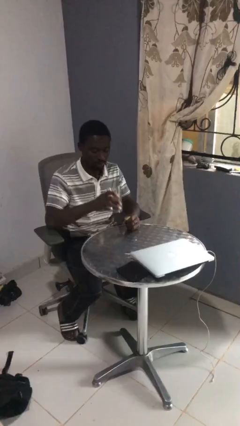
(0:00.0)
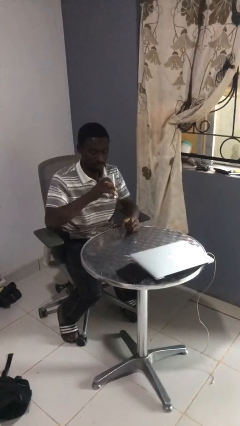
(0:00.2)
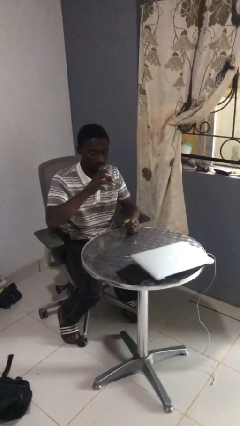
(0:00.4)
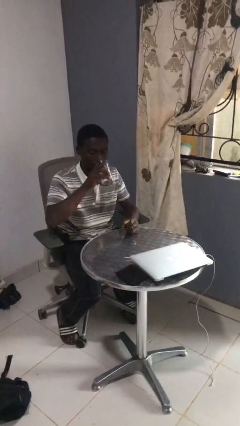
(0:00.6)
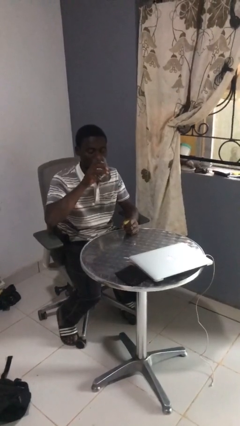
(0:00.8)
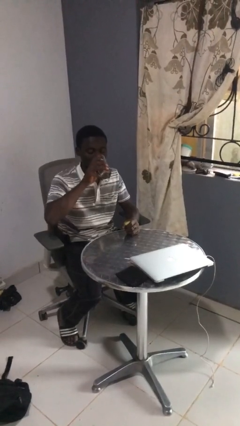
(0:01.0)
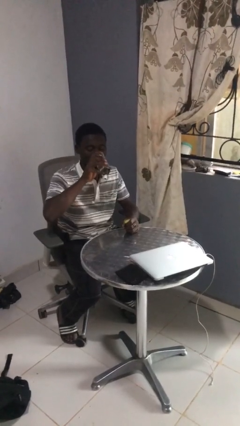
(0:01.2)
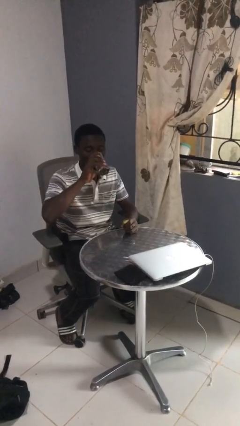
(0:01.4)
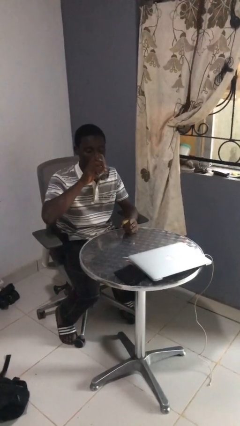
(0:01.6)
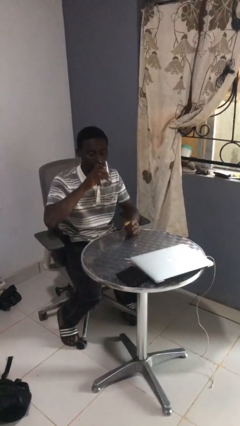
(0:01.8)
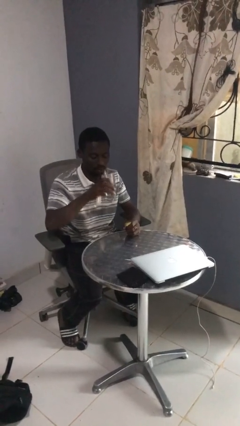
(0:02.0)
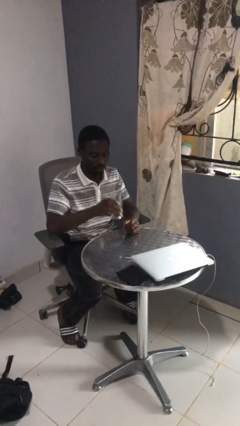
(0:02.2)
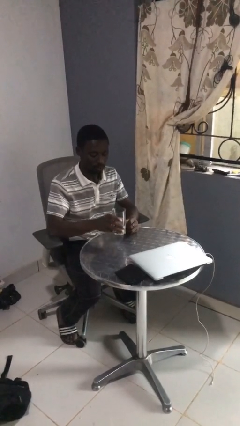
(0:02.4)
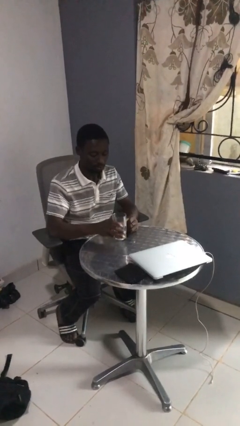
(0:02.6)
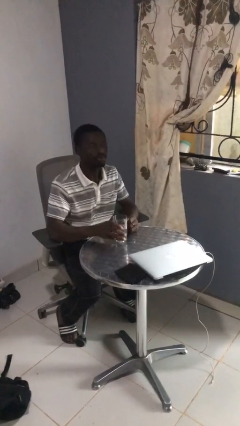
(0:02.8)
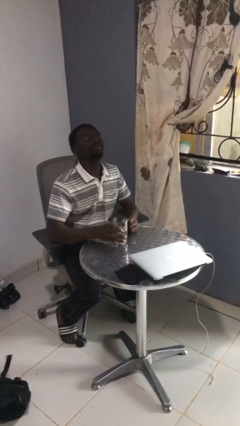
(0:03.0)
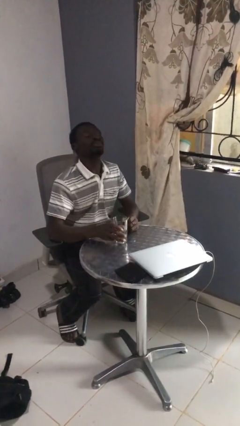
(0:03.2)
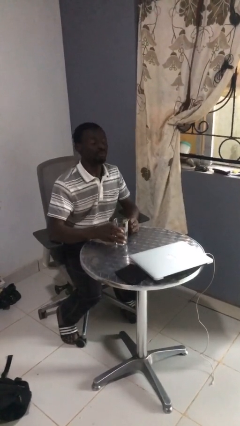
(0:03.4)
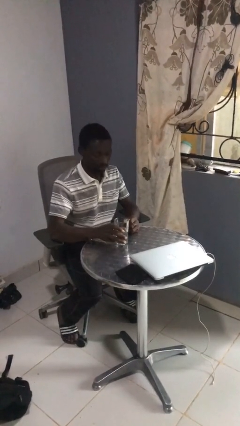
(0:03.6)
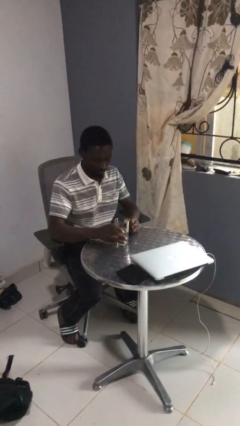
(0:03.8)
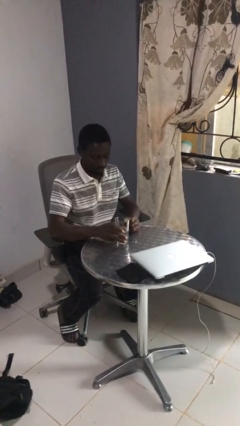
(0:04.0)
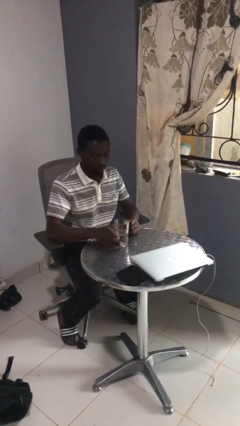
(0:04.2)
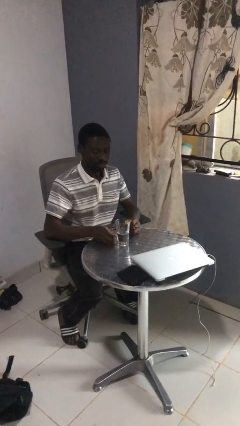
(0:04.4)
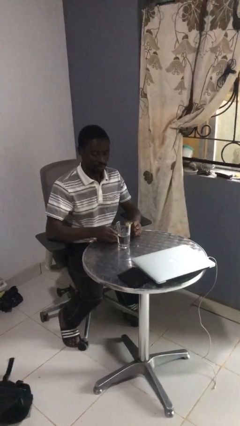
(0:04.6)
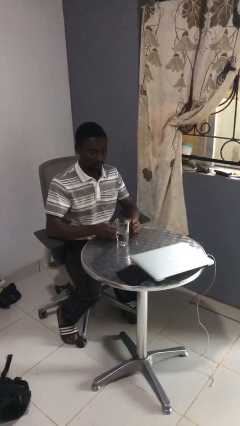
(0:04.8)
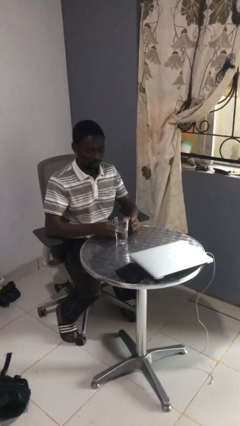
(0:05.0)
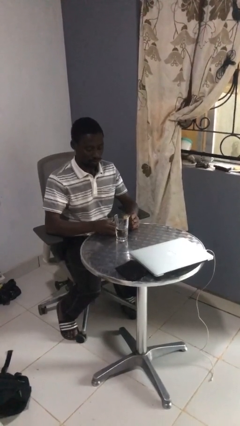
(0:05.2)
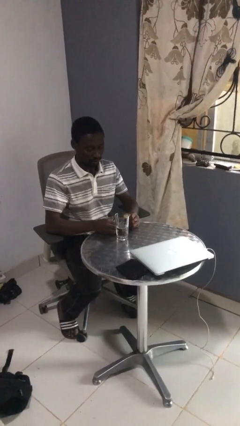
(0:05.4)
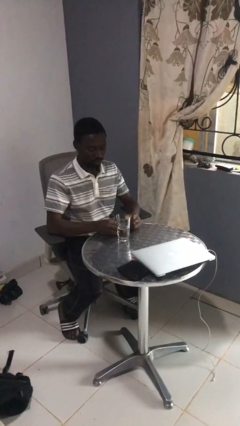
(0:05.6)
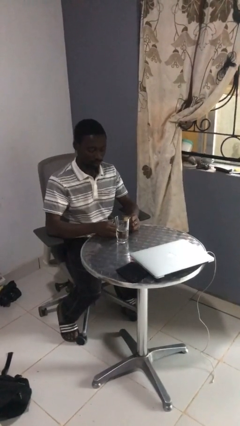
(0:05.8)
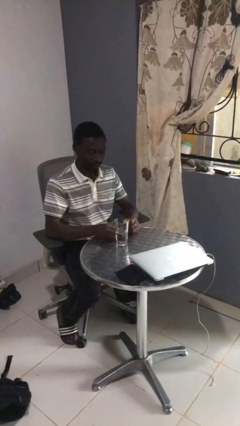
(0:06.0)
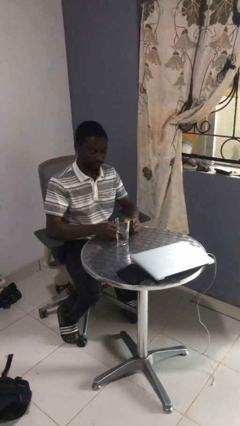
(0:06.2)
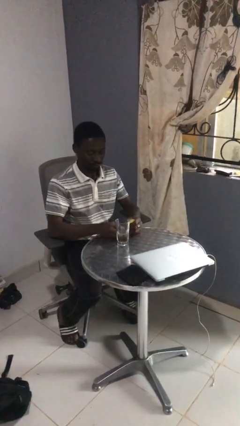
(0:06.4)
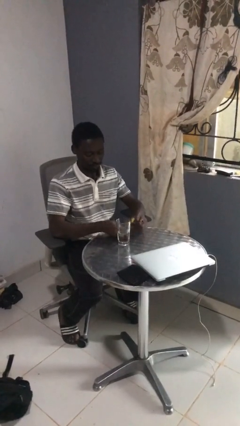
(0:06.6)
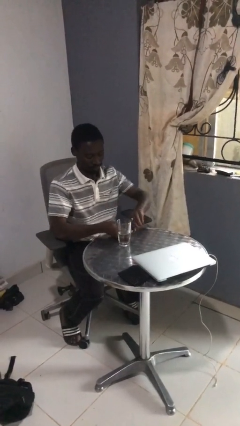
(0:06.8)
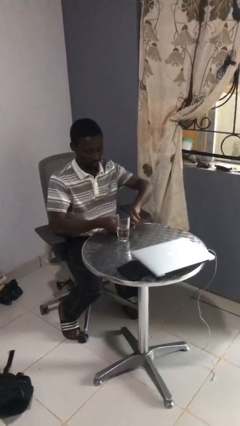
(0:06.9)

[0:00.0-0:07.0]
person drinks from cup

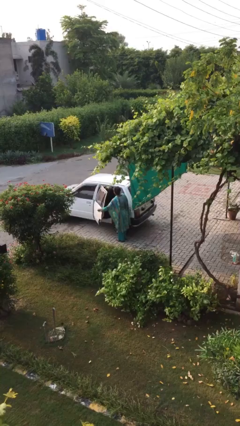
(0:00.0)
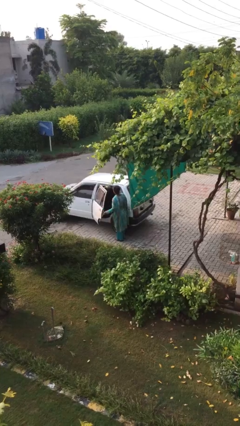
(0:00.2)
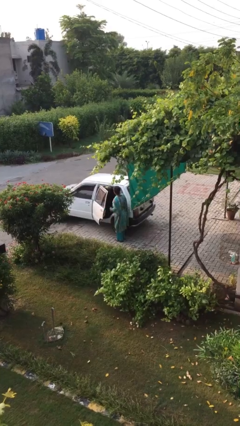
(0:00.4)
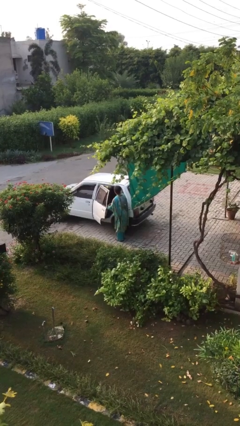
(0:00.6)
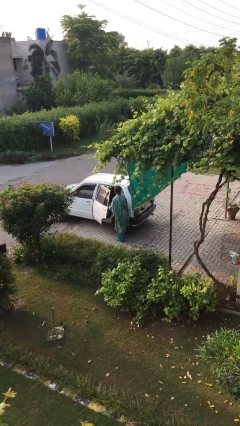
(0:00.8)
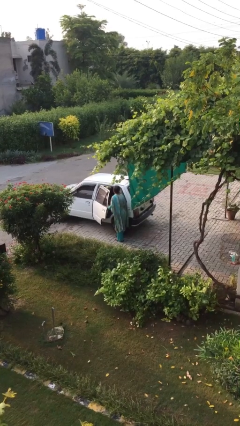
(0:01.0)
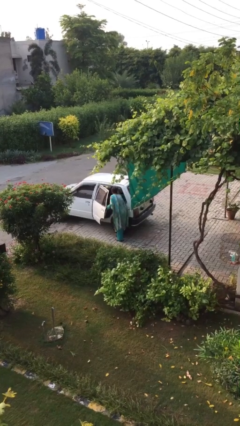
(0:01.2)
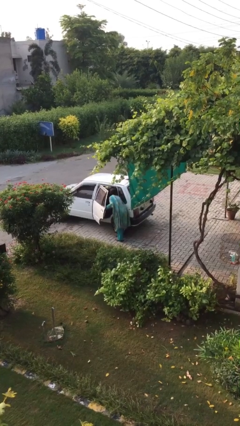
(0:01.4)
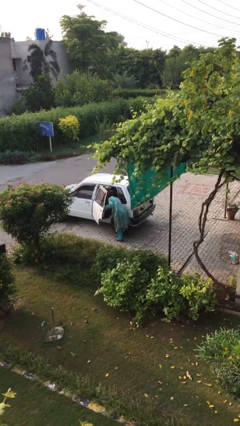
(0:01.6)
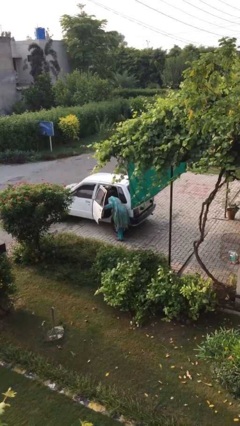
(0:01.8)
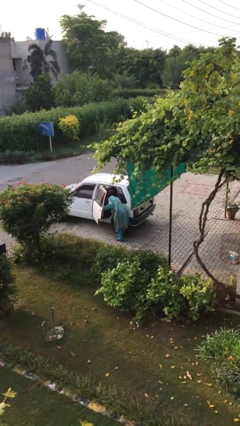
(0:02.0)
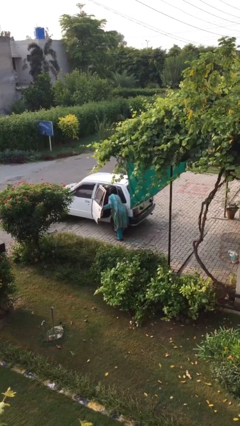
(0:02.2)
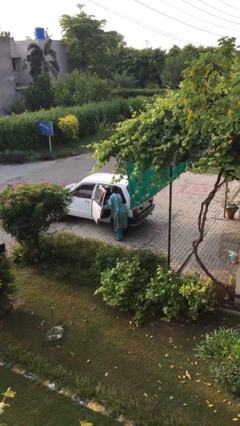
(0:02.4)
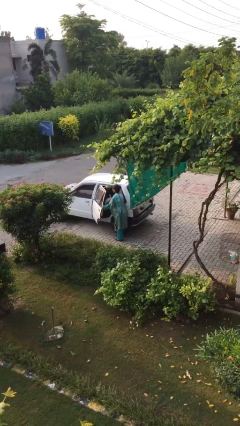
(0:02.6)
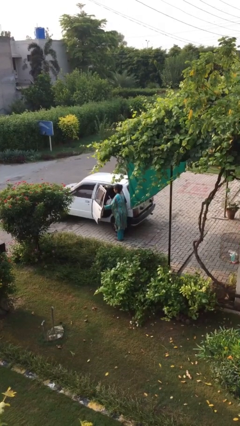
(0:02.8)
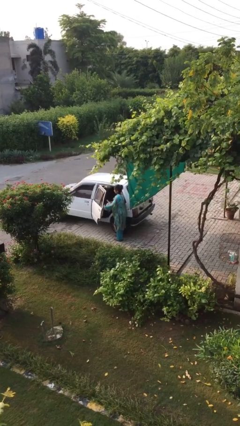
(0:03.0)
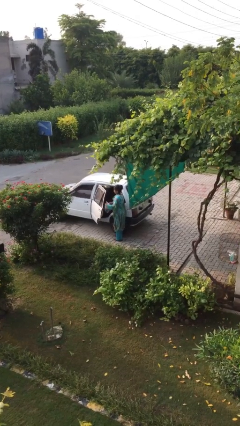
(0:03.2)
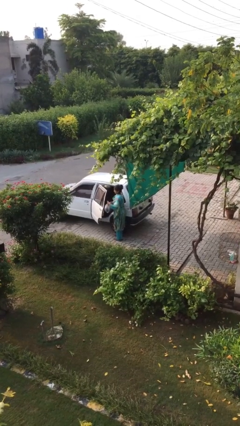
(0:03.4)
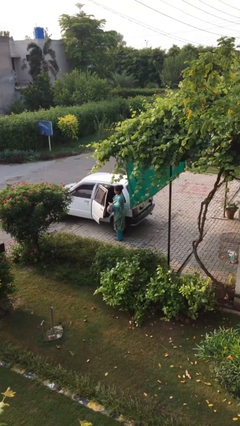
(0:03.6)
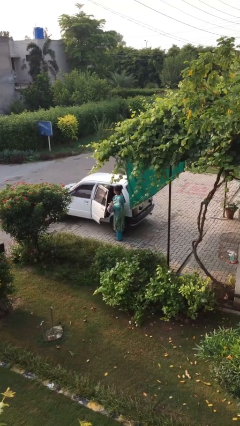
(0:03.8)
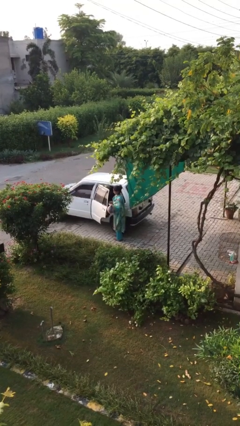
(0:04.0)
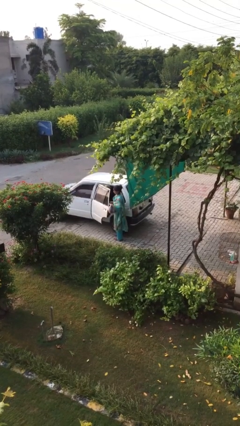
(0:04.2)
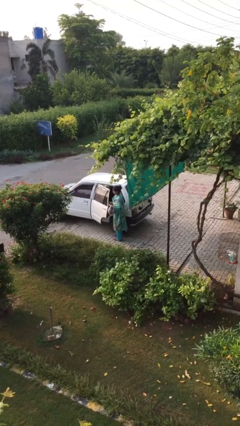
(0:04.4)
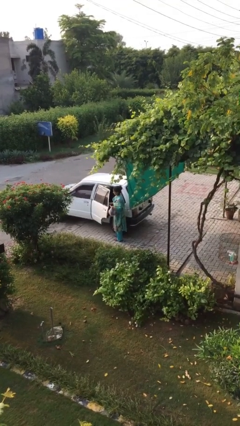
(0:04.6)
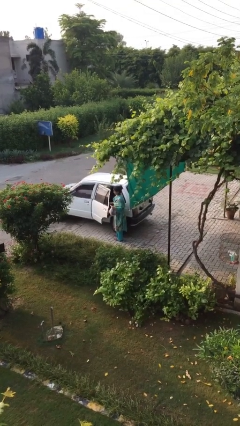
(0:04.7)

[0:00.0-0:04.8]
person unloads car

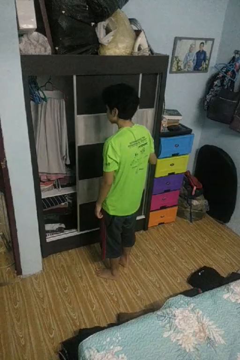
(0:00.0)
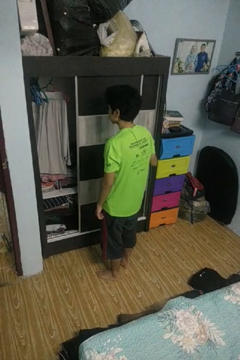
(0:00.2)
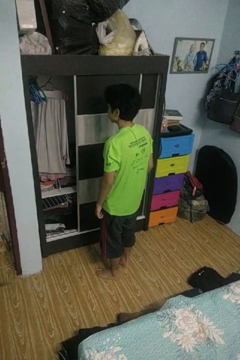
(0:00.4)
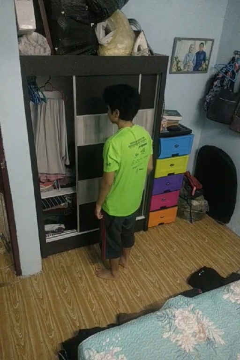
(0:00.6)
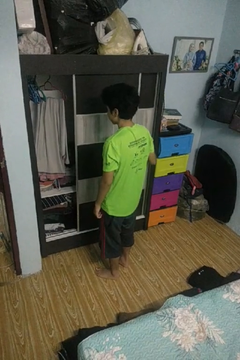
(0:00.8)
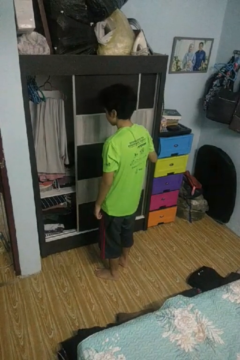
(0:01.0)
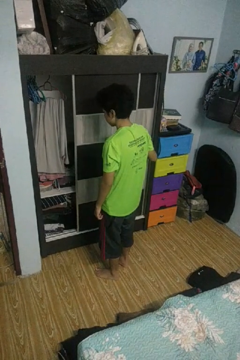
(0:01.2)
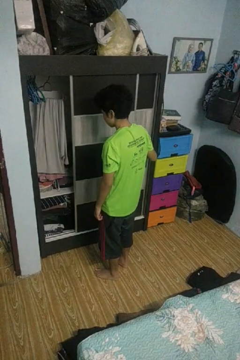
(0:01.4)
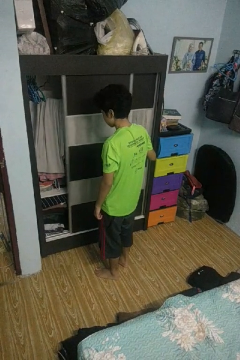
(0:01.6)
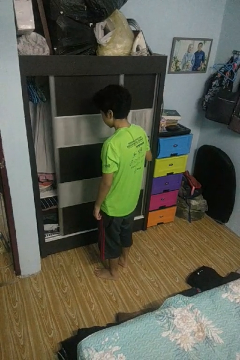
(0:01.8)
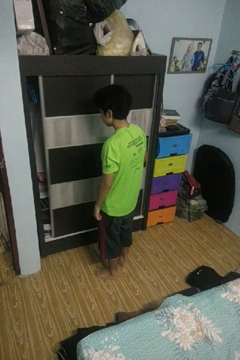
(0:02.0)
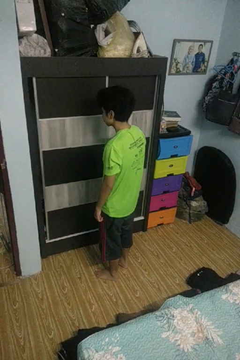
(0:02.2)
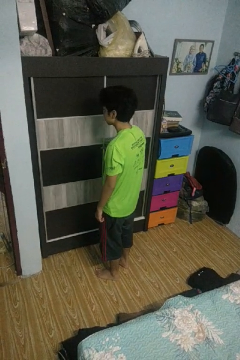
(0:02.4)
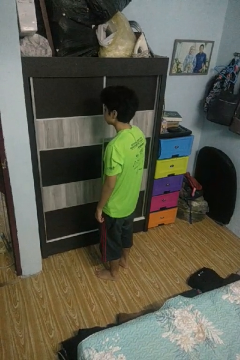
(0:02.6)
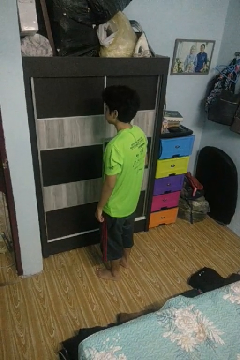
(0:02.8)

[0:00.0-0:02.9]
person closes closet door

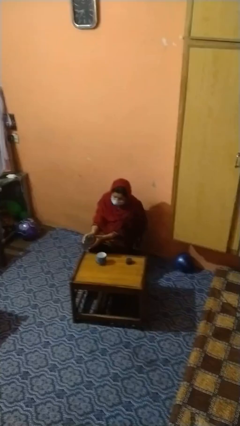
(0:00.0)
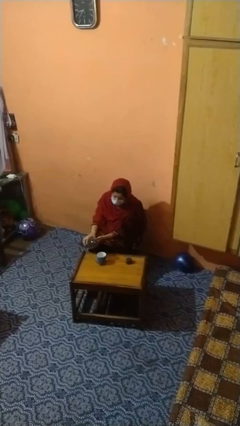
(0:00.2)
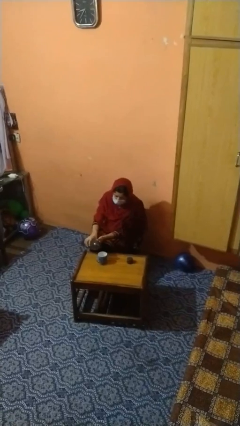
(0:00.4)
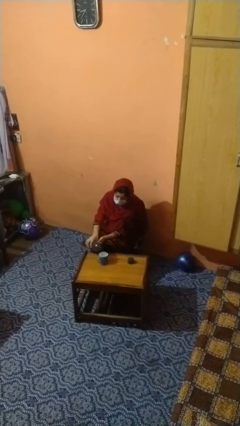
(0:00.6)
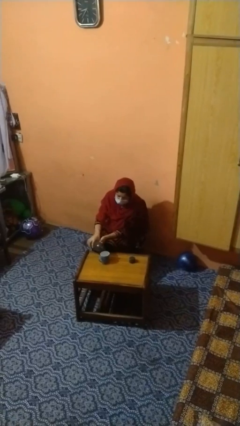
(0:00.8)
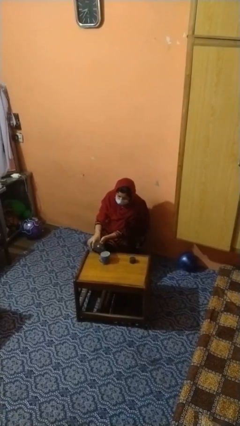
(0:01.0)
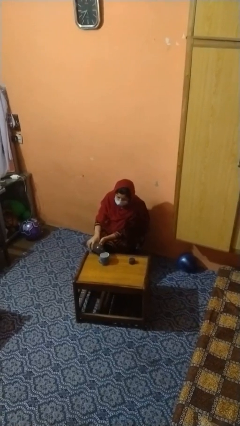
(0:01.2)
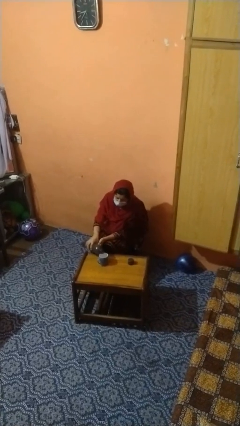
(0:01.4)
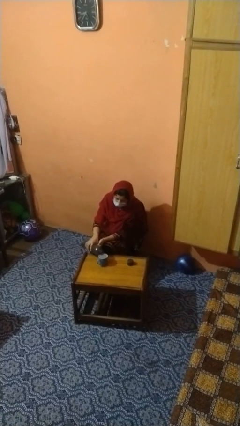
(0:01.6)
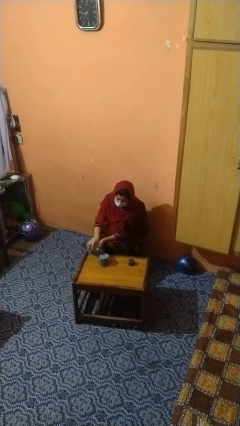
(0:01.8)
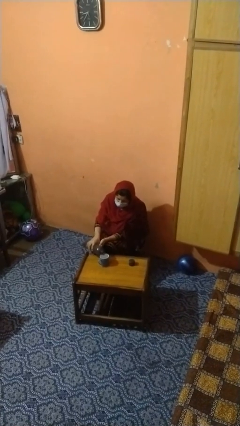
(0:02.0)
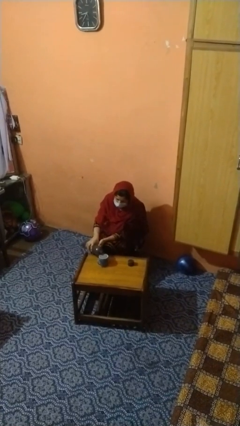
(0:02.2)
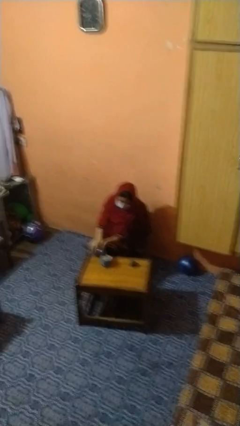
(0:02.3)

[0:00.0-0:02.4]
person pours liquid into cup

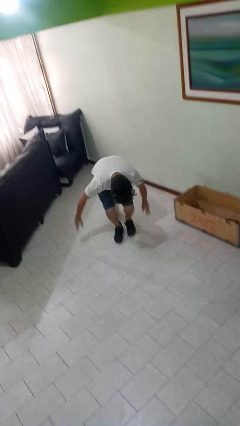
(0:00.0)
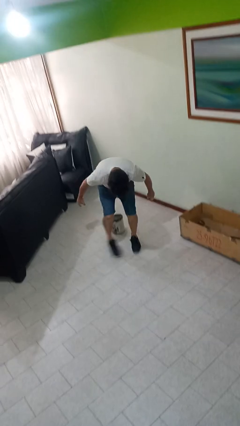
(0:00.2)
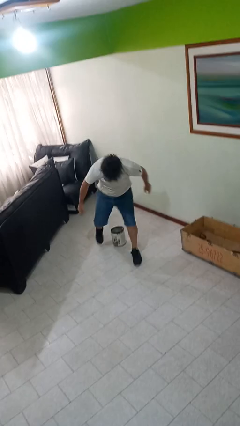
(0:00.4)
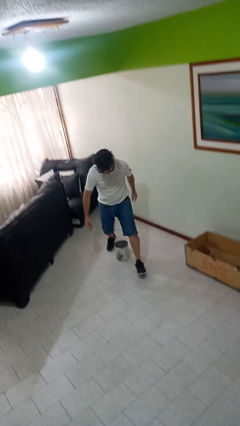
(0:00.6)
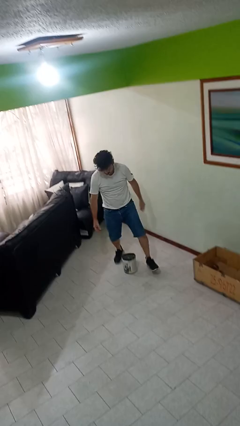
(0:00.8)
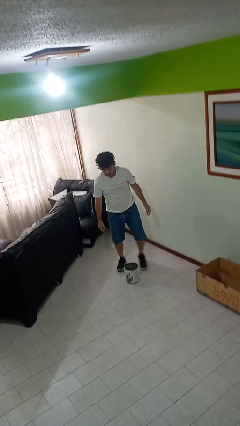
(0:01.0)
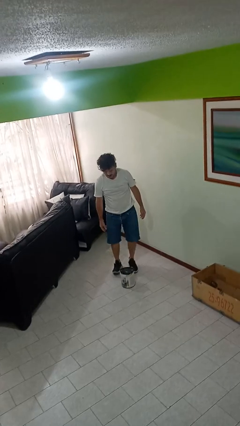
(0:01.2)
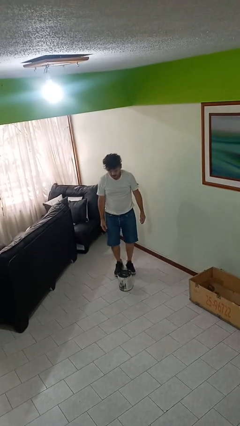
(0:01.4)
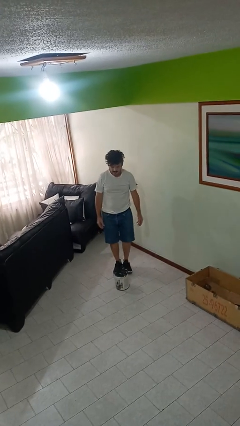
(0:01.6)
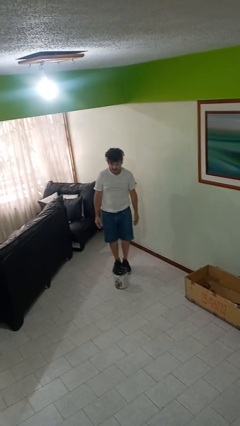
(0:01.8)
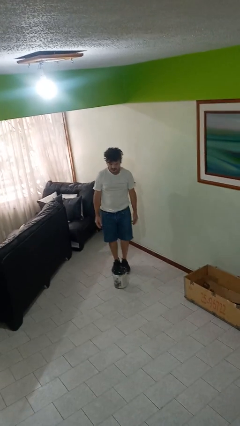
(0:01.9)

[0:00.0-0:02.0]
person stands up from floor
